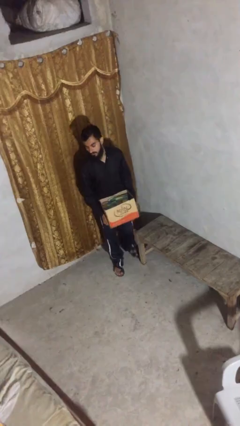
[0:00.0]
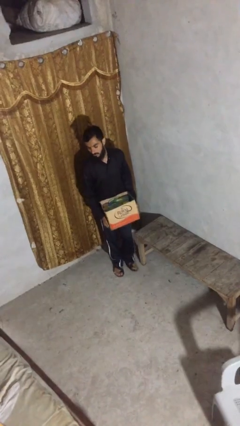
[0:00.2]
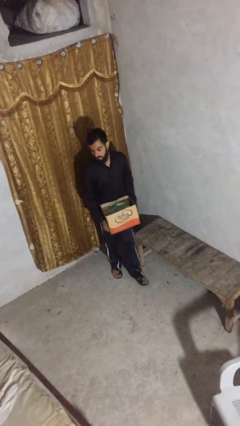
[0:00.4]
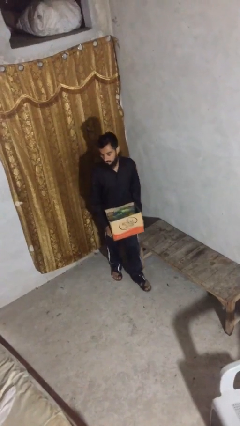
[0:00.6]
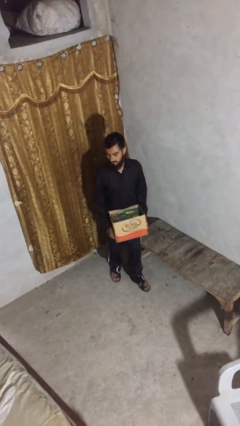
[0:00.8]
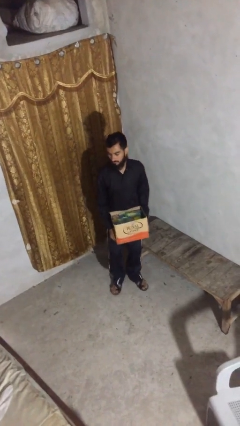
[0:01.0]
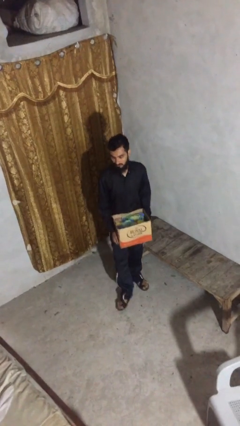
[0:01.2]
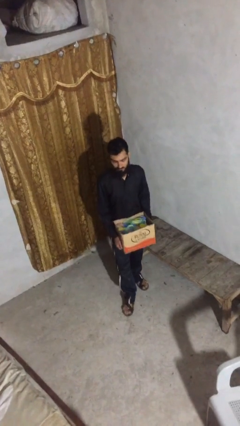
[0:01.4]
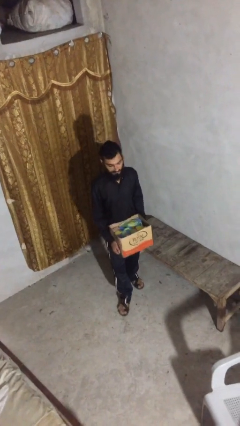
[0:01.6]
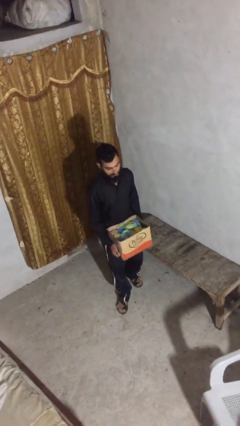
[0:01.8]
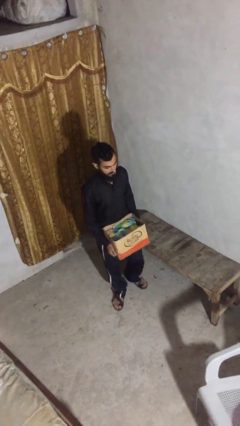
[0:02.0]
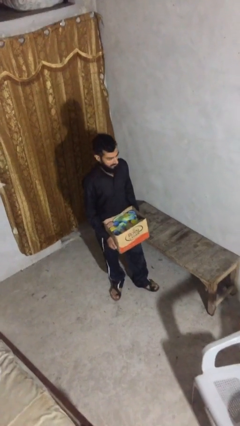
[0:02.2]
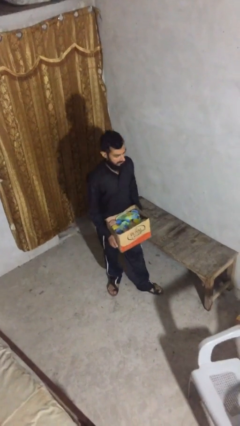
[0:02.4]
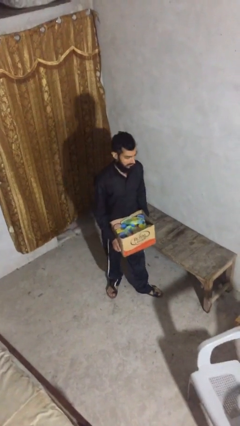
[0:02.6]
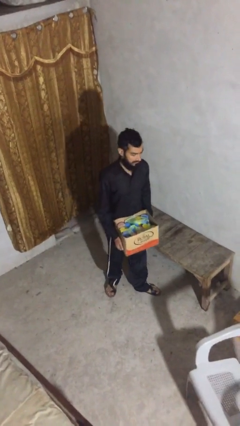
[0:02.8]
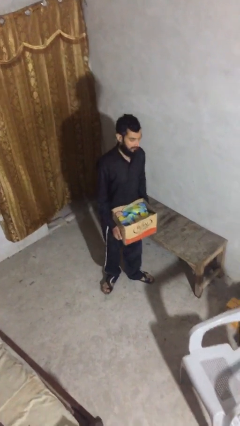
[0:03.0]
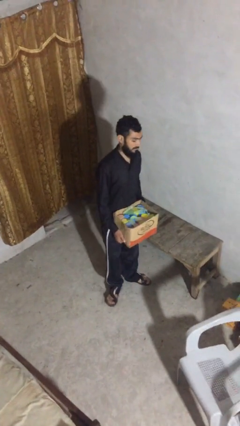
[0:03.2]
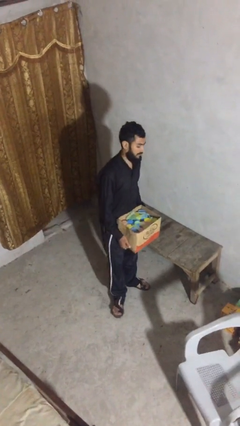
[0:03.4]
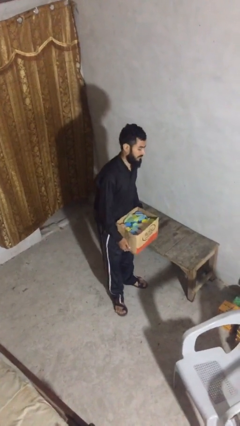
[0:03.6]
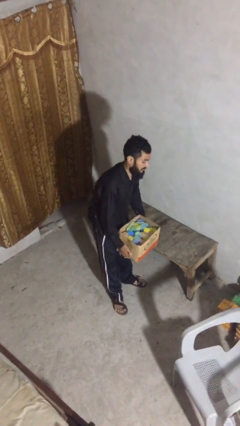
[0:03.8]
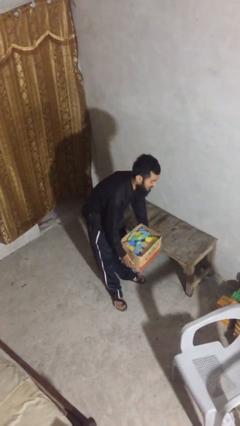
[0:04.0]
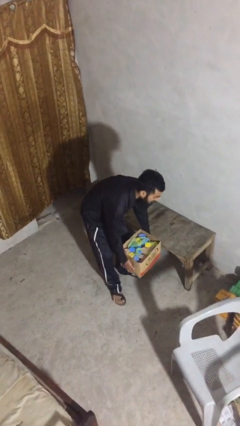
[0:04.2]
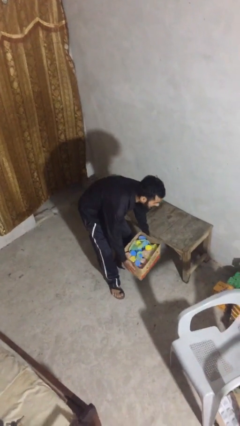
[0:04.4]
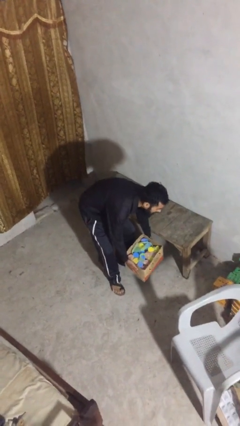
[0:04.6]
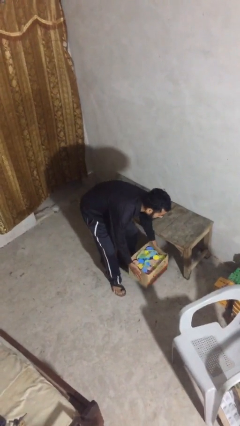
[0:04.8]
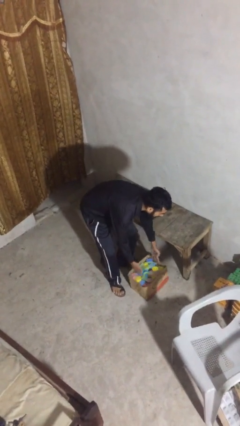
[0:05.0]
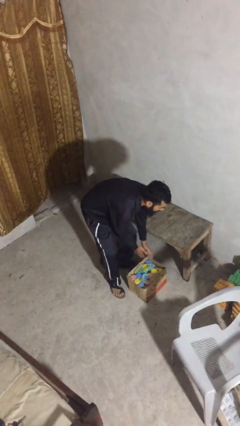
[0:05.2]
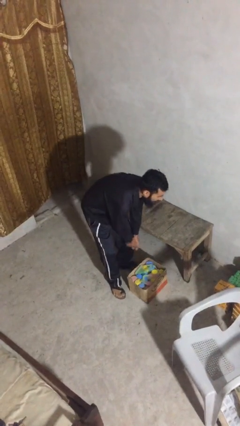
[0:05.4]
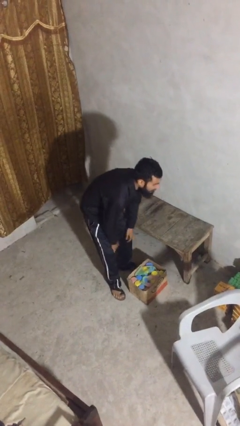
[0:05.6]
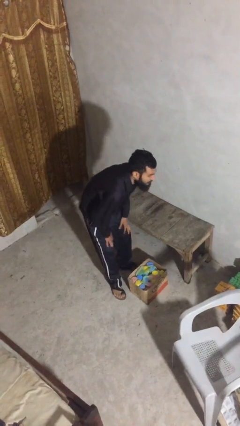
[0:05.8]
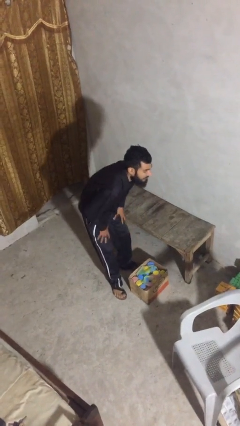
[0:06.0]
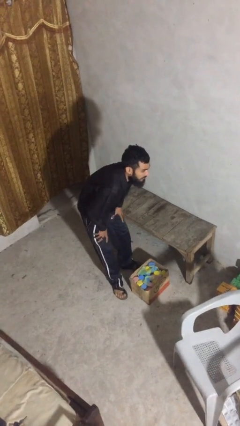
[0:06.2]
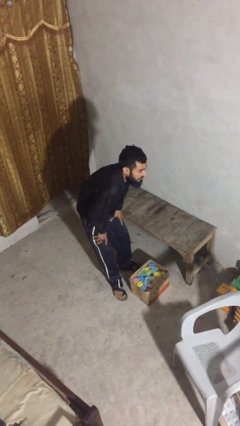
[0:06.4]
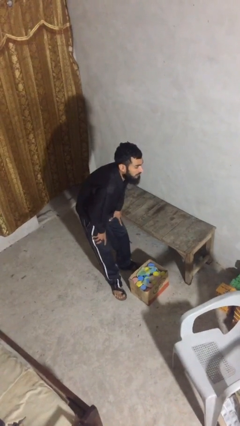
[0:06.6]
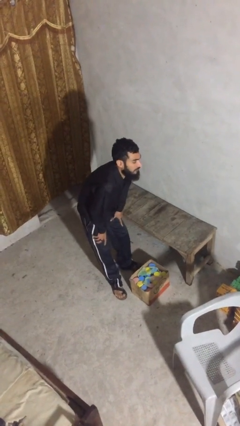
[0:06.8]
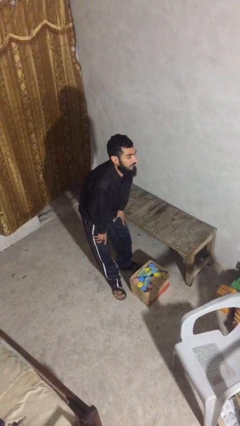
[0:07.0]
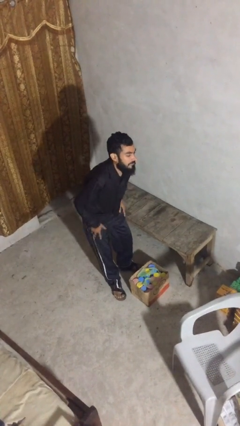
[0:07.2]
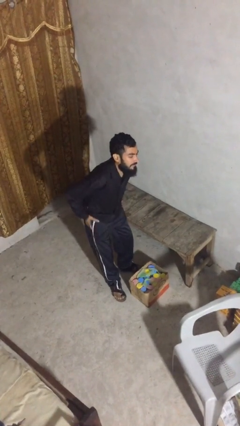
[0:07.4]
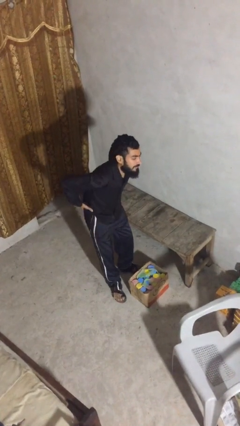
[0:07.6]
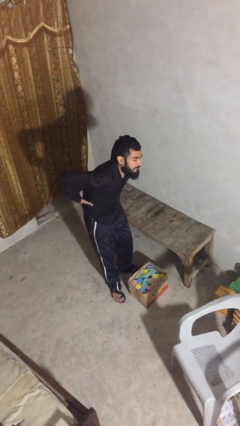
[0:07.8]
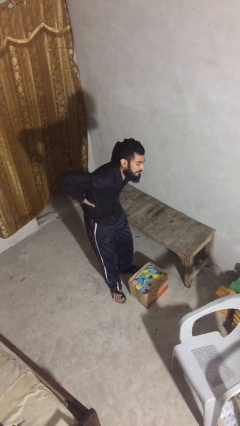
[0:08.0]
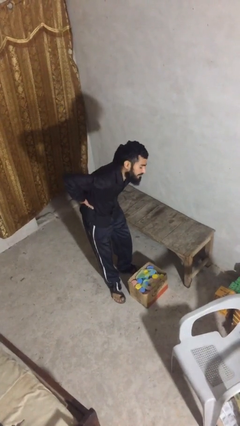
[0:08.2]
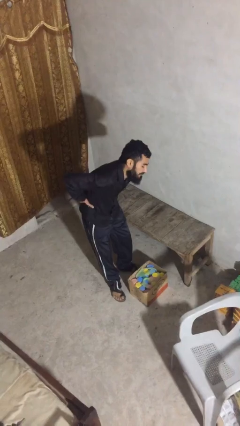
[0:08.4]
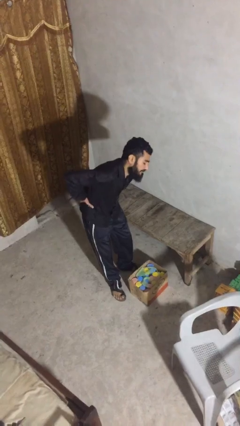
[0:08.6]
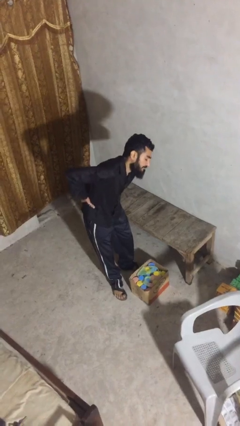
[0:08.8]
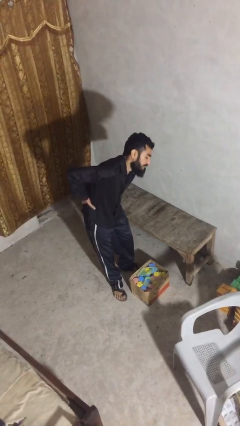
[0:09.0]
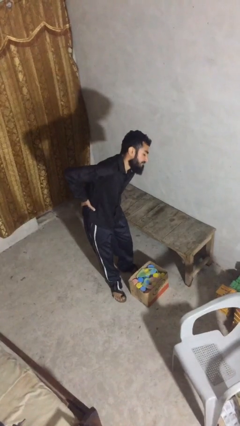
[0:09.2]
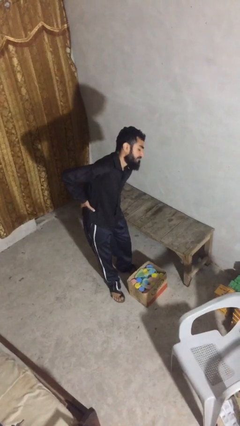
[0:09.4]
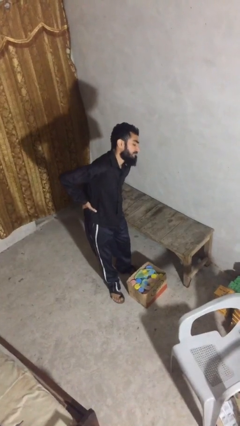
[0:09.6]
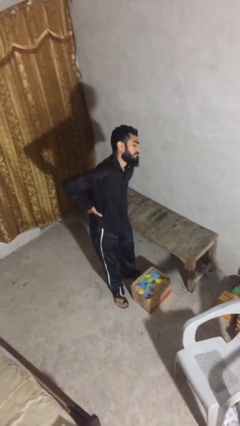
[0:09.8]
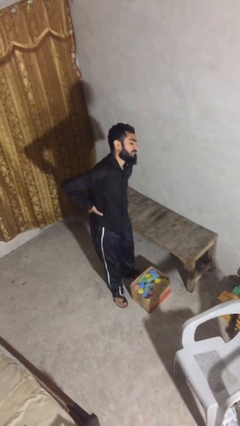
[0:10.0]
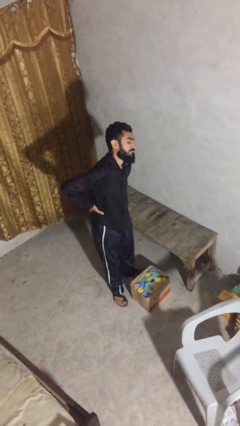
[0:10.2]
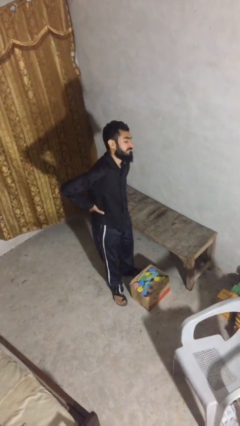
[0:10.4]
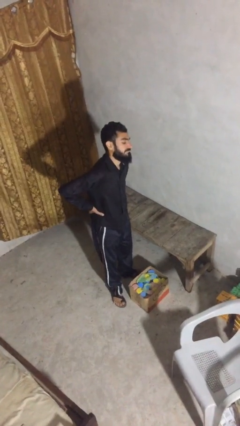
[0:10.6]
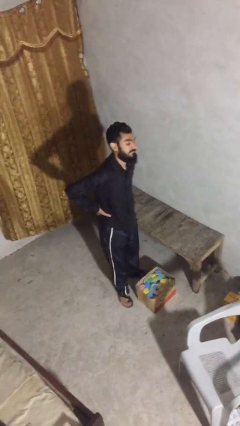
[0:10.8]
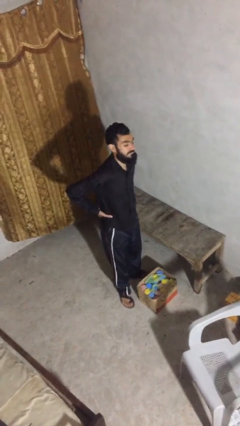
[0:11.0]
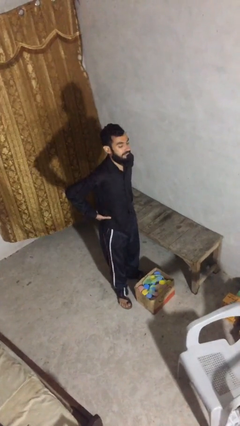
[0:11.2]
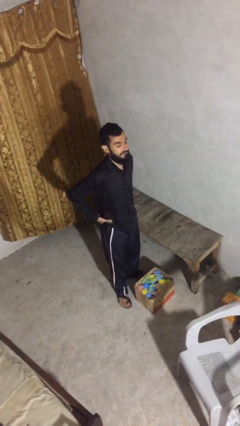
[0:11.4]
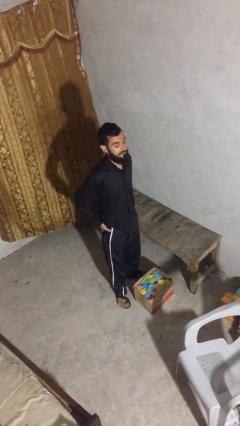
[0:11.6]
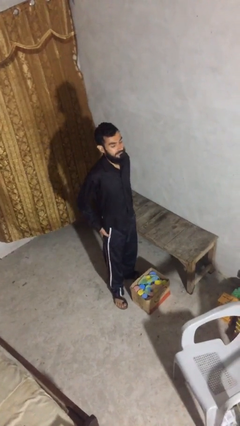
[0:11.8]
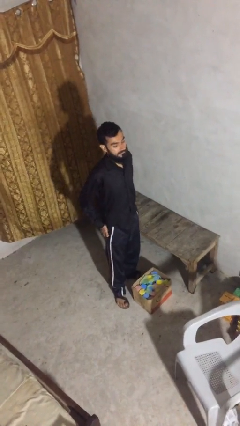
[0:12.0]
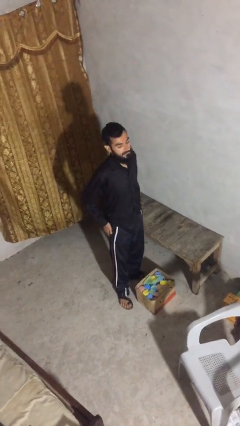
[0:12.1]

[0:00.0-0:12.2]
person puts down object on floor

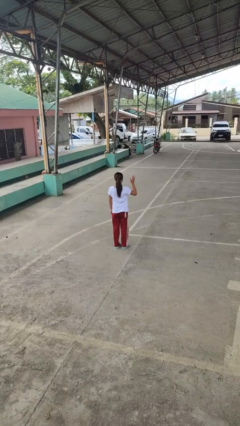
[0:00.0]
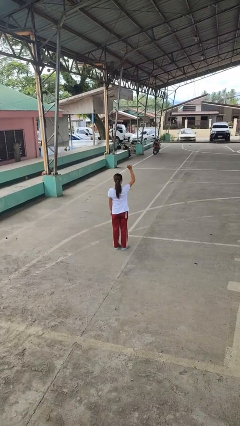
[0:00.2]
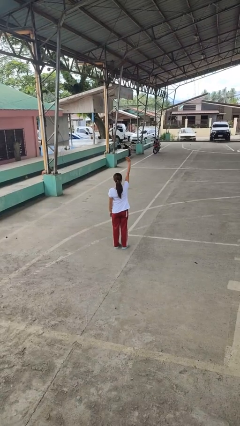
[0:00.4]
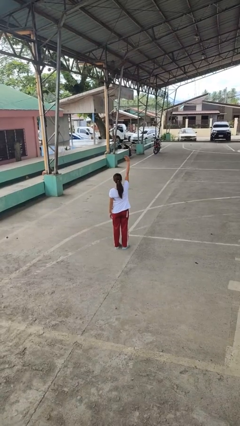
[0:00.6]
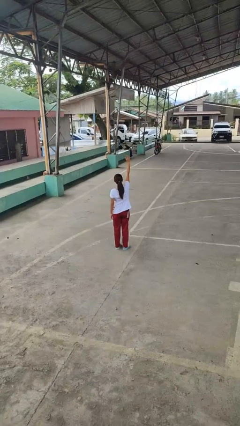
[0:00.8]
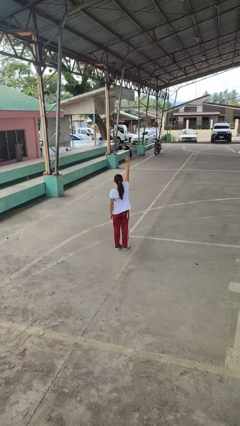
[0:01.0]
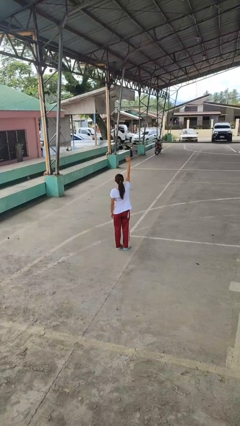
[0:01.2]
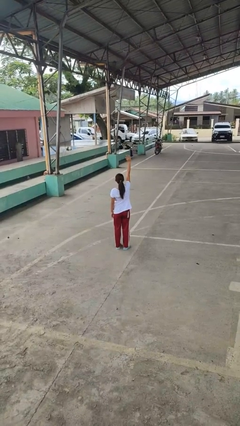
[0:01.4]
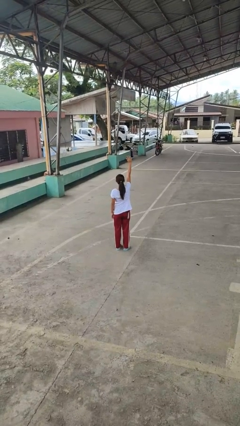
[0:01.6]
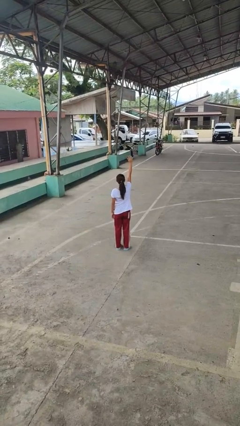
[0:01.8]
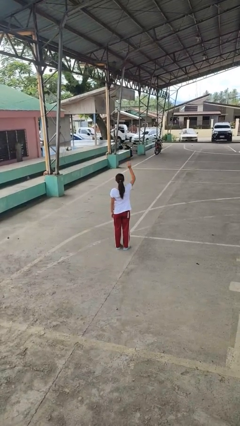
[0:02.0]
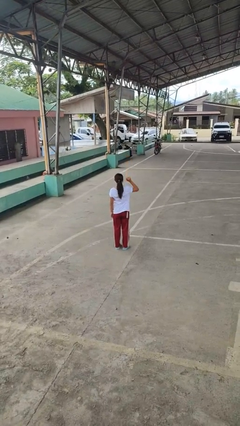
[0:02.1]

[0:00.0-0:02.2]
person gestures raise hand

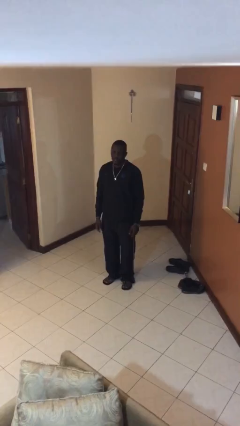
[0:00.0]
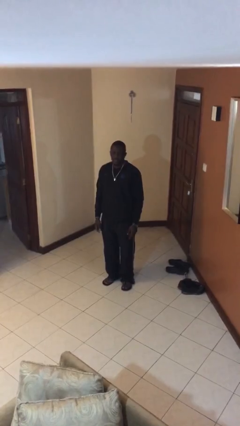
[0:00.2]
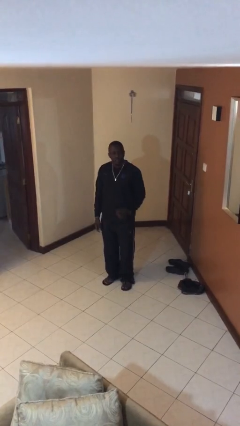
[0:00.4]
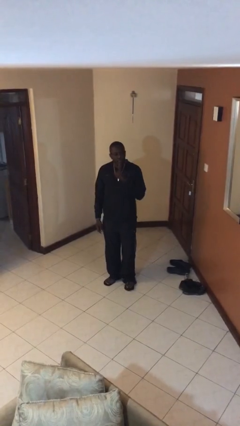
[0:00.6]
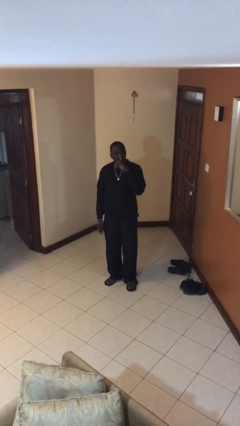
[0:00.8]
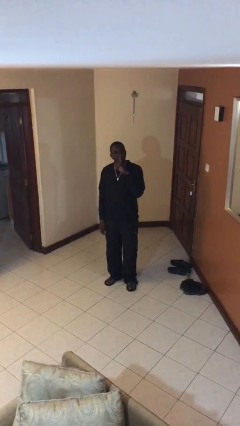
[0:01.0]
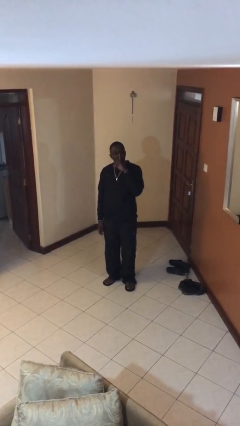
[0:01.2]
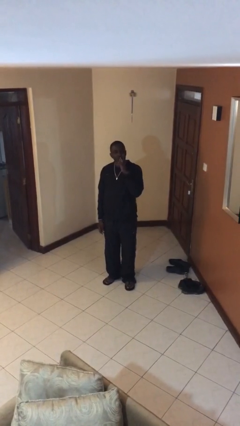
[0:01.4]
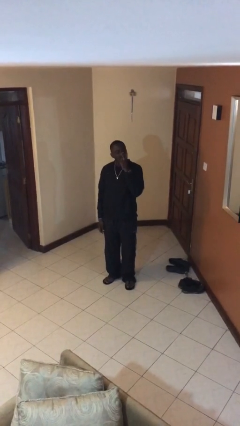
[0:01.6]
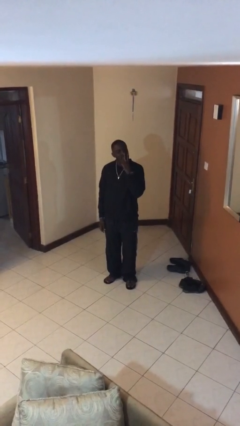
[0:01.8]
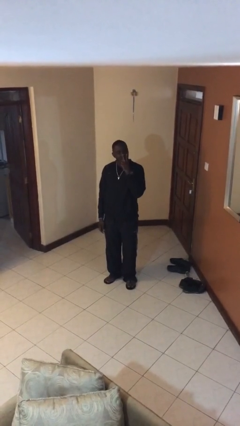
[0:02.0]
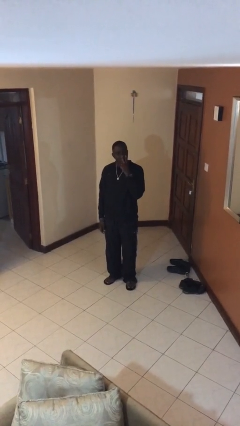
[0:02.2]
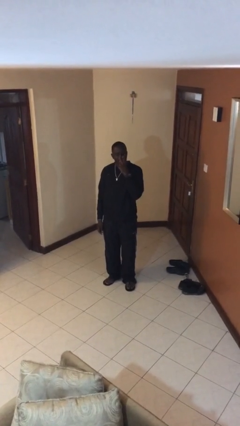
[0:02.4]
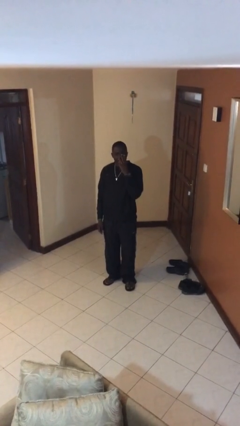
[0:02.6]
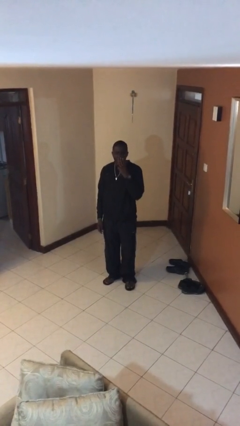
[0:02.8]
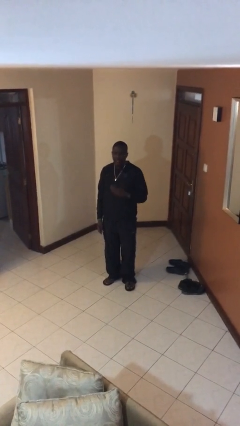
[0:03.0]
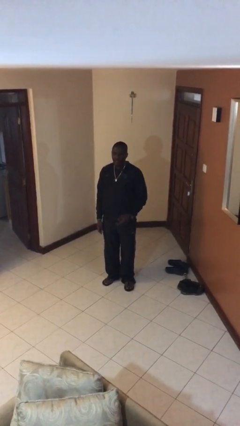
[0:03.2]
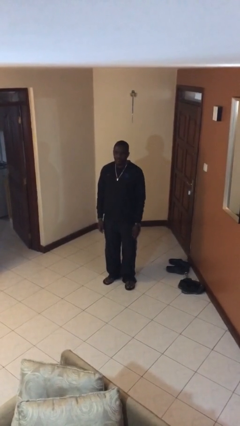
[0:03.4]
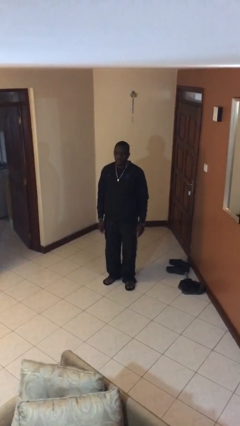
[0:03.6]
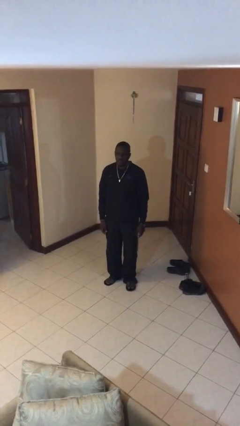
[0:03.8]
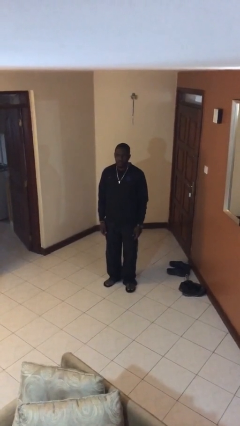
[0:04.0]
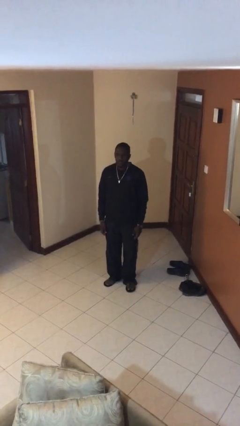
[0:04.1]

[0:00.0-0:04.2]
person licks fingers
